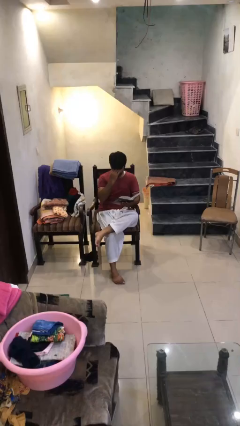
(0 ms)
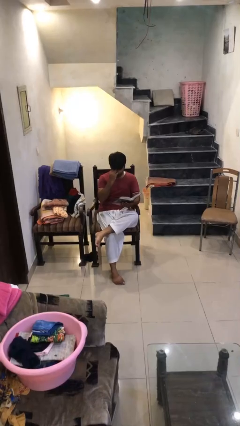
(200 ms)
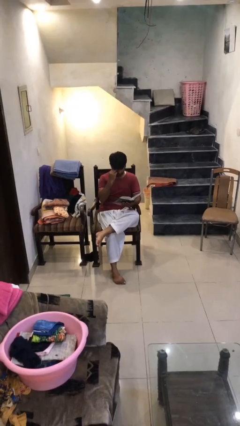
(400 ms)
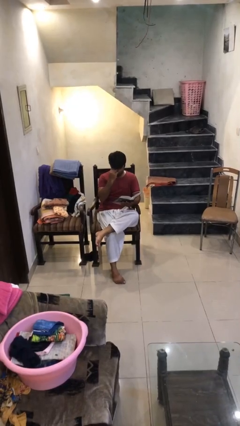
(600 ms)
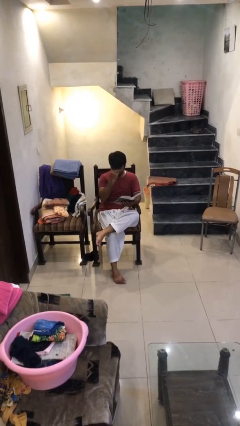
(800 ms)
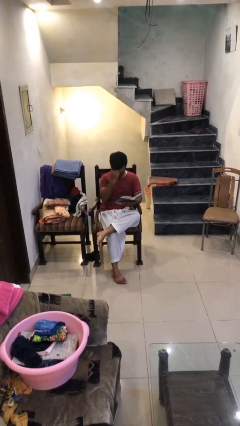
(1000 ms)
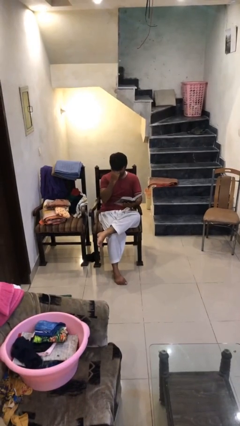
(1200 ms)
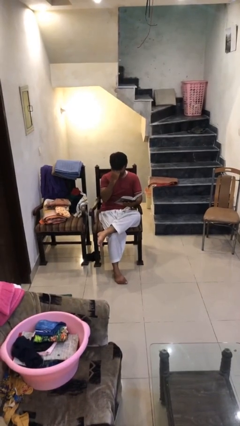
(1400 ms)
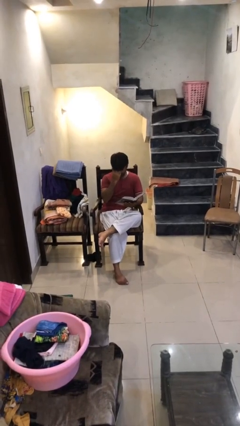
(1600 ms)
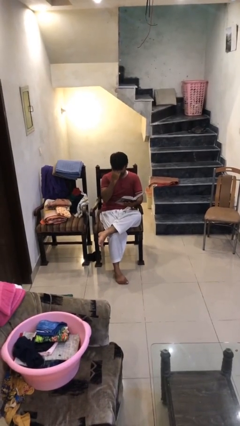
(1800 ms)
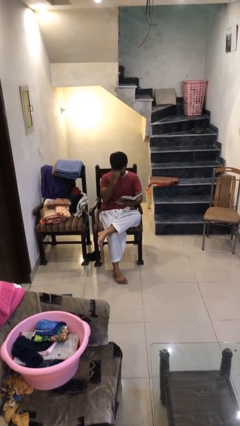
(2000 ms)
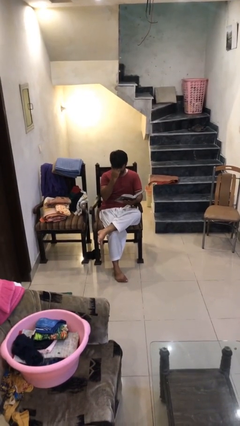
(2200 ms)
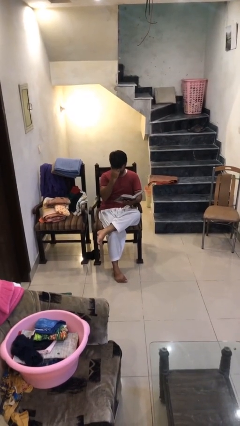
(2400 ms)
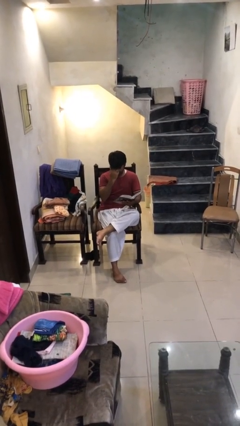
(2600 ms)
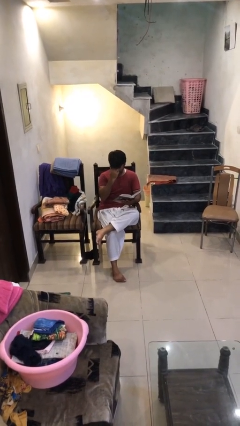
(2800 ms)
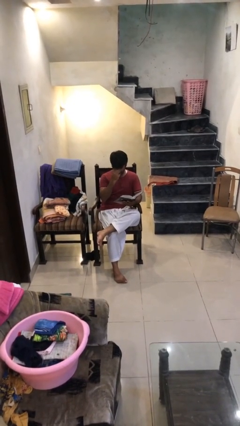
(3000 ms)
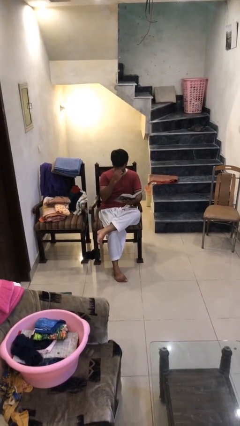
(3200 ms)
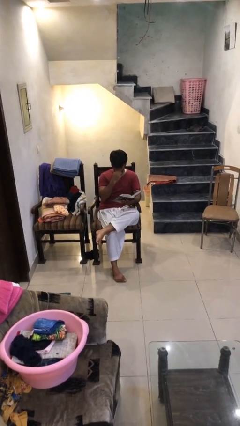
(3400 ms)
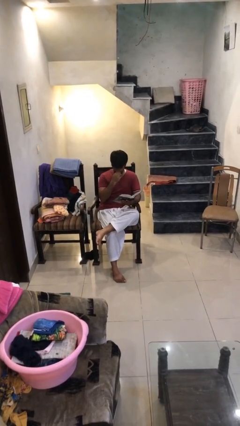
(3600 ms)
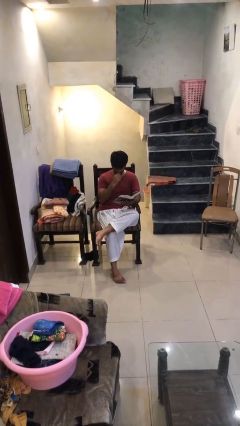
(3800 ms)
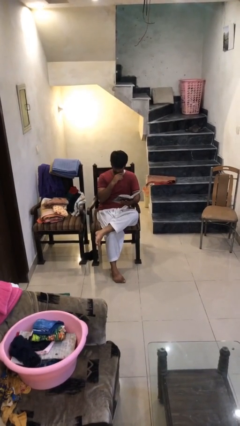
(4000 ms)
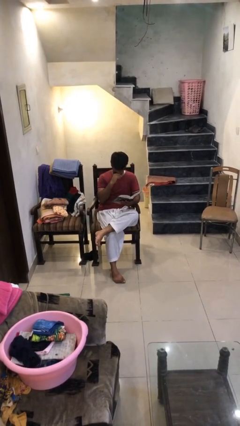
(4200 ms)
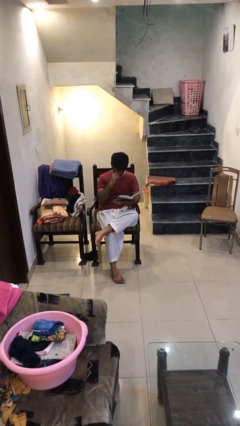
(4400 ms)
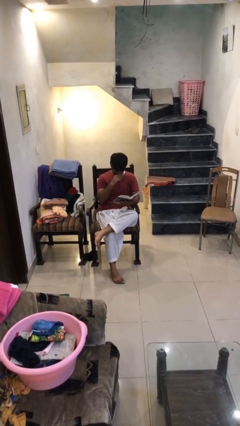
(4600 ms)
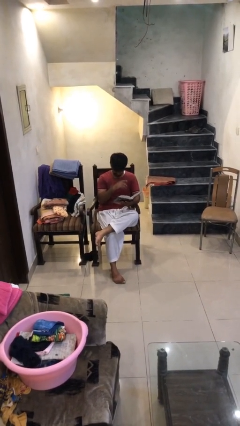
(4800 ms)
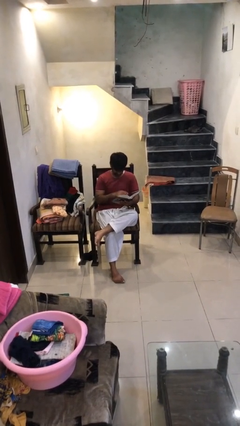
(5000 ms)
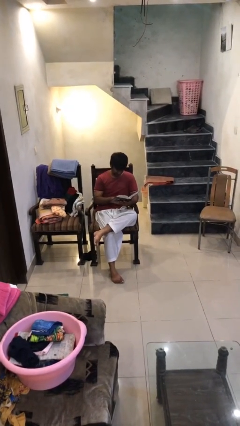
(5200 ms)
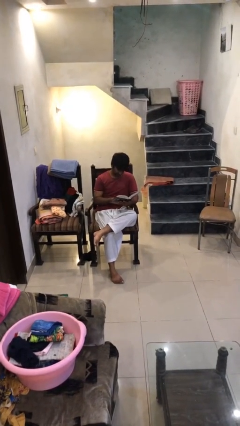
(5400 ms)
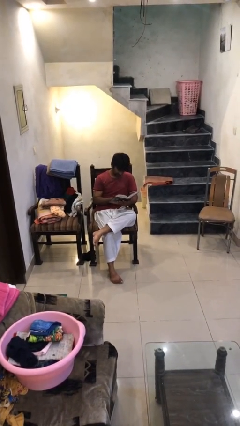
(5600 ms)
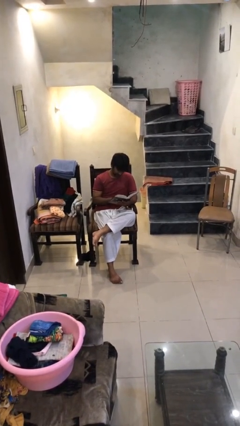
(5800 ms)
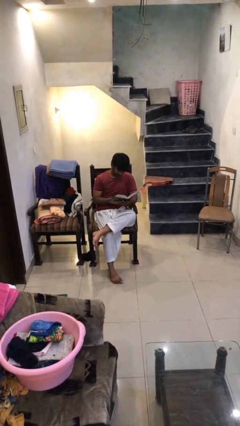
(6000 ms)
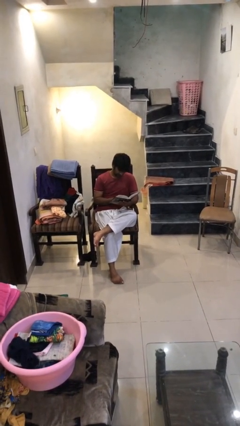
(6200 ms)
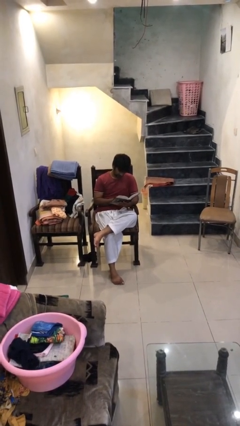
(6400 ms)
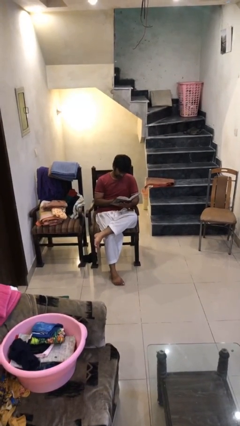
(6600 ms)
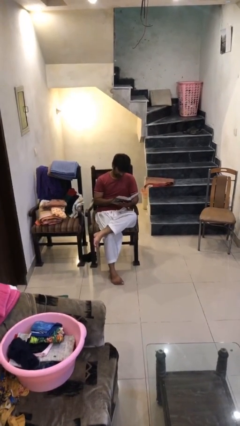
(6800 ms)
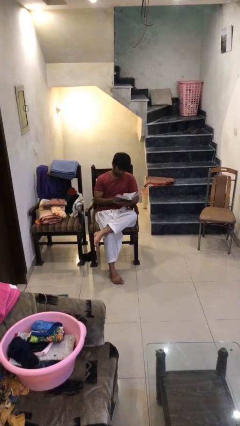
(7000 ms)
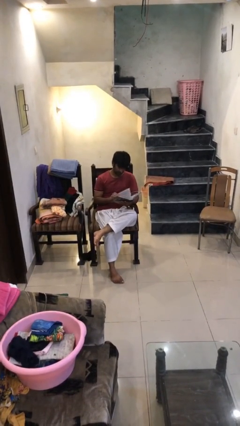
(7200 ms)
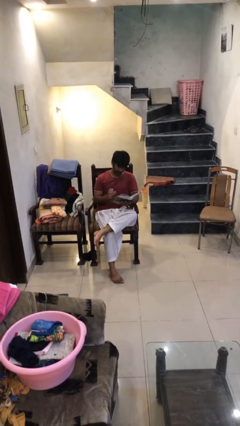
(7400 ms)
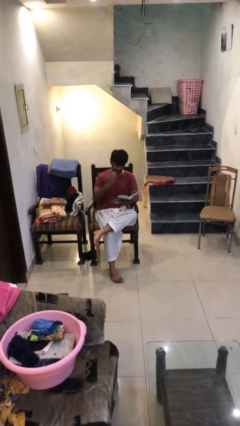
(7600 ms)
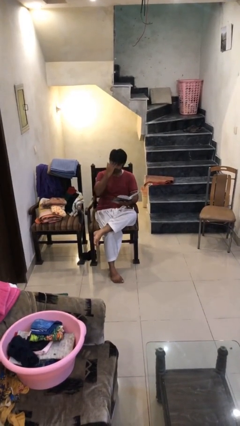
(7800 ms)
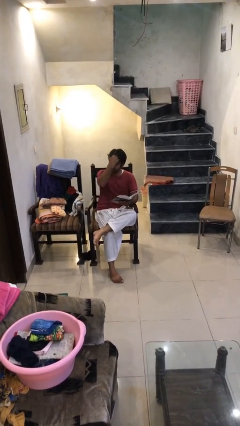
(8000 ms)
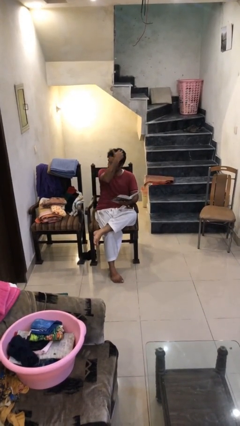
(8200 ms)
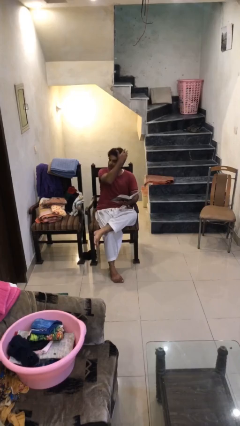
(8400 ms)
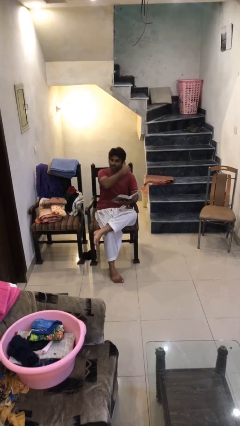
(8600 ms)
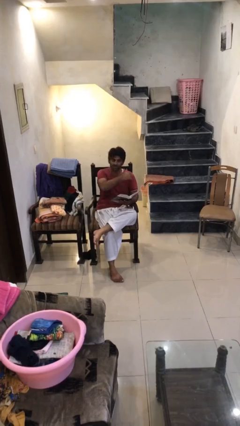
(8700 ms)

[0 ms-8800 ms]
person reads document

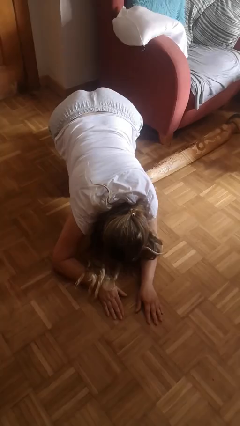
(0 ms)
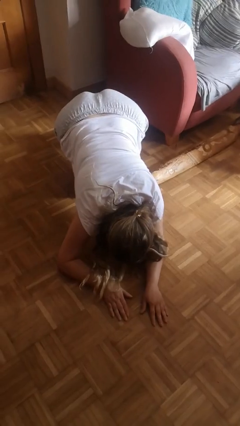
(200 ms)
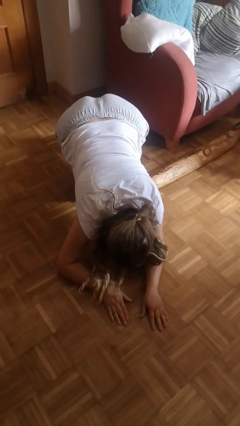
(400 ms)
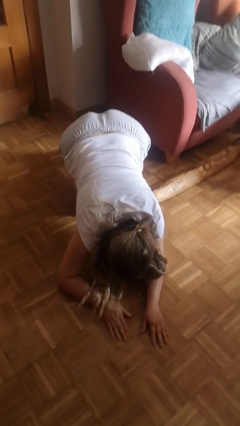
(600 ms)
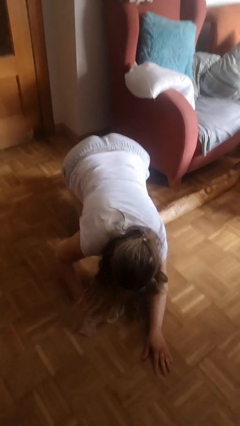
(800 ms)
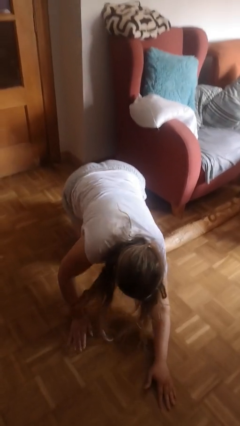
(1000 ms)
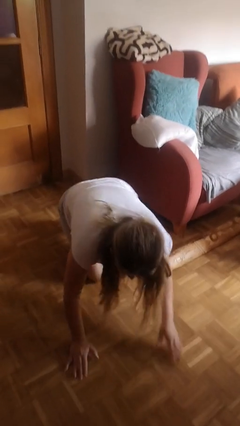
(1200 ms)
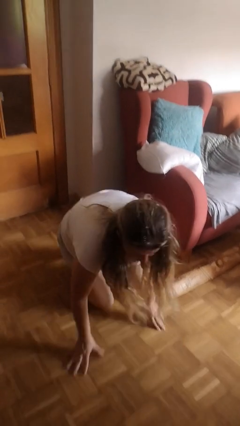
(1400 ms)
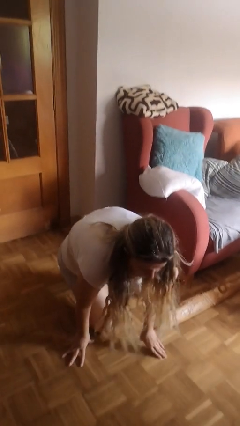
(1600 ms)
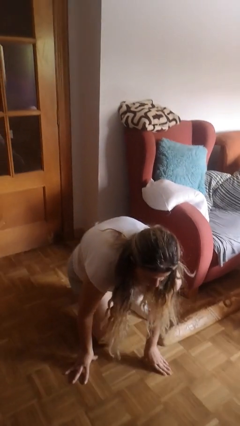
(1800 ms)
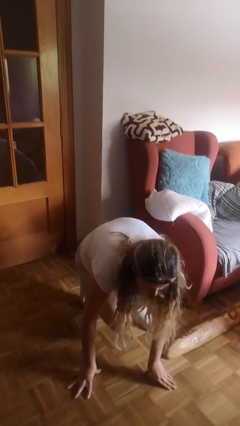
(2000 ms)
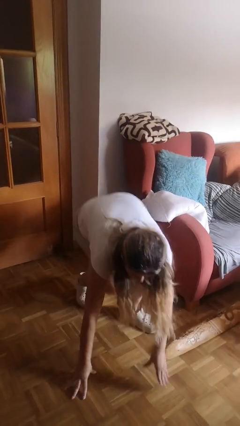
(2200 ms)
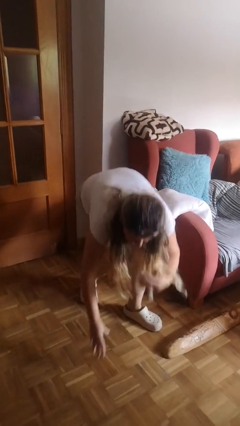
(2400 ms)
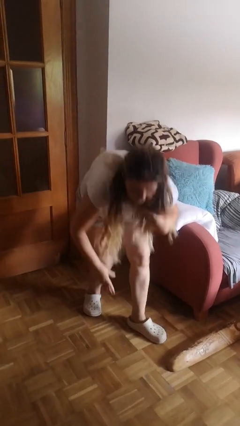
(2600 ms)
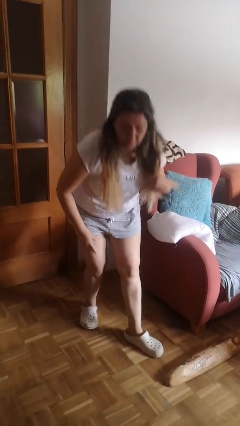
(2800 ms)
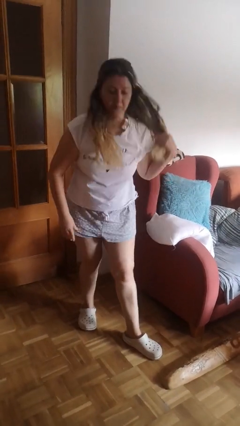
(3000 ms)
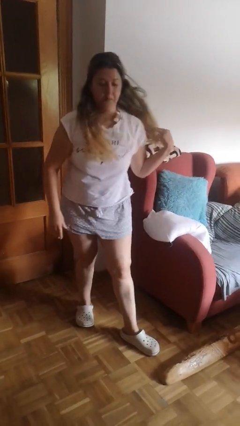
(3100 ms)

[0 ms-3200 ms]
person stands up from floor

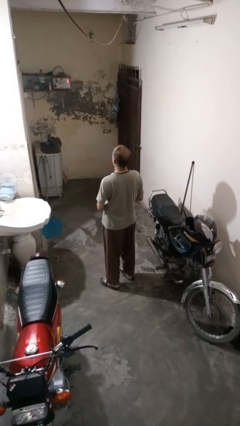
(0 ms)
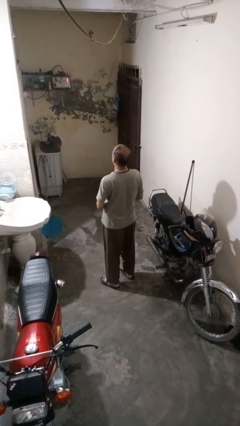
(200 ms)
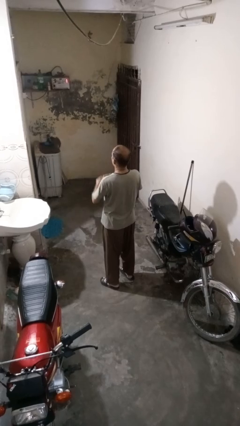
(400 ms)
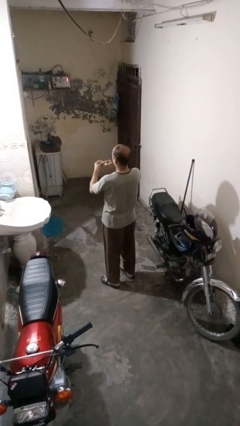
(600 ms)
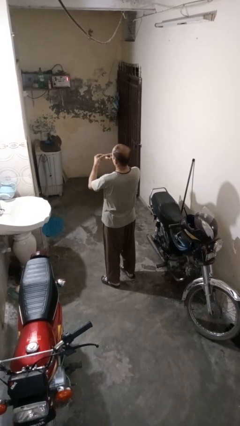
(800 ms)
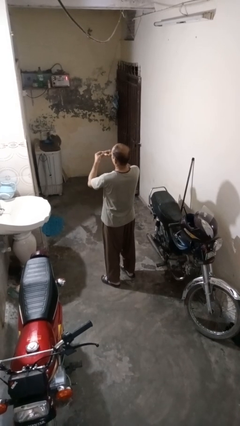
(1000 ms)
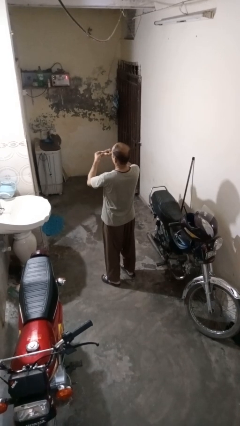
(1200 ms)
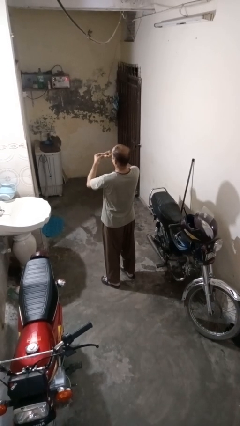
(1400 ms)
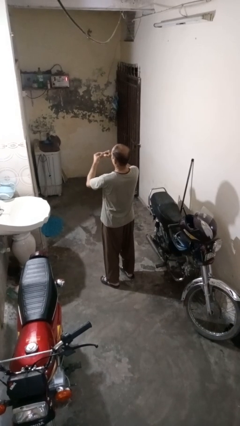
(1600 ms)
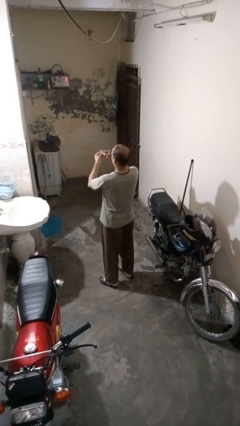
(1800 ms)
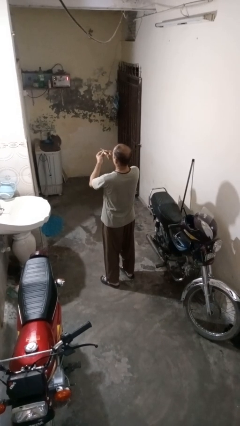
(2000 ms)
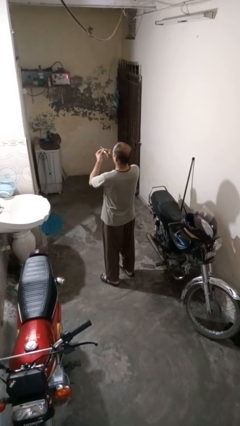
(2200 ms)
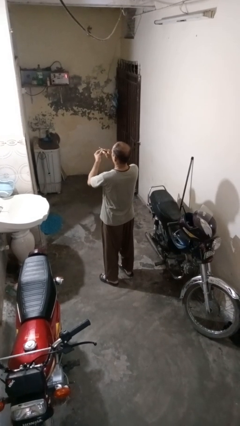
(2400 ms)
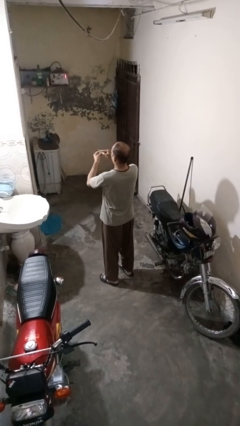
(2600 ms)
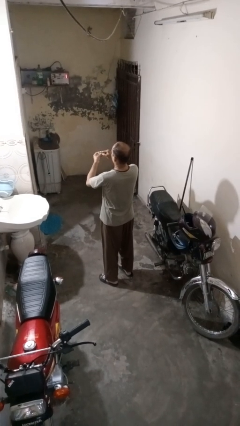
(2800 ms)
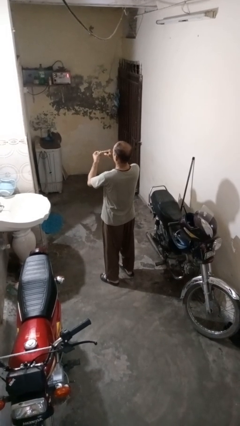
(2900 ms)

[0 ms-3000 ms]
person files fingernails

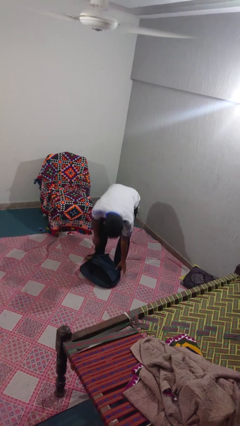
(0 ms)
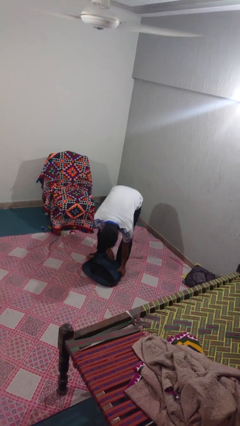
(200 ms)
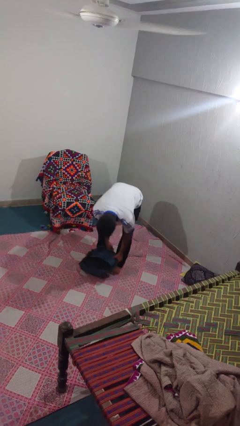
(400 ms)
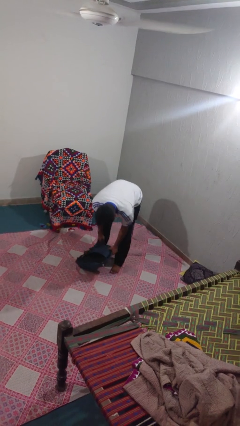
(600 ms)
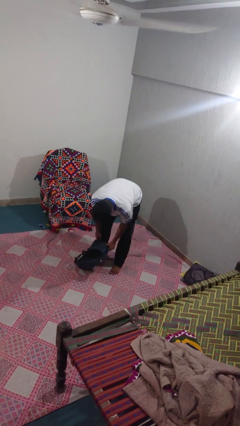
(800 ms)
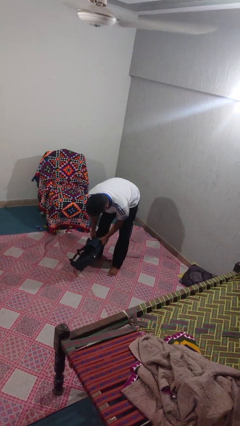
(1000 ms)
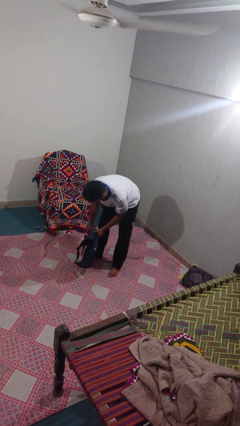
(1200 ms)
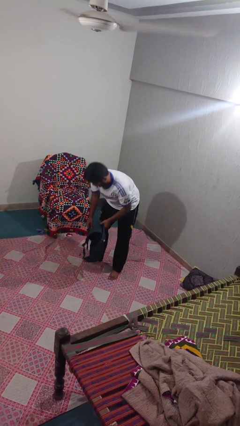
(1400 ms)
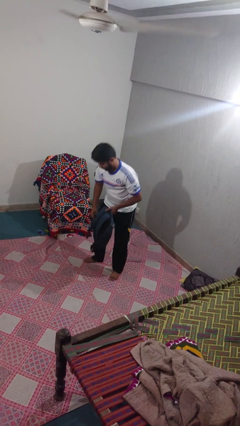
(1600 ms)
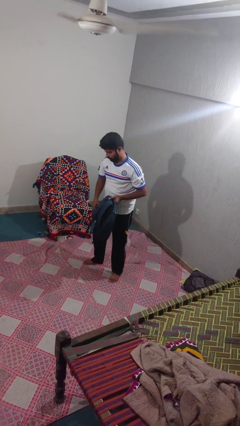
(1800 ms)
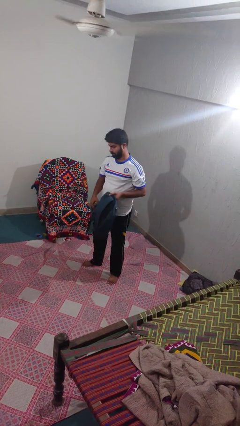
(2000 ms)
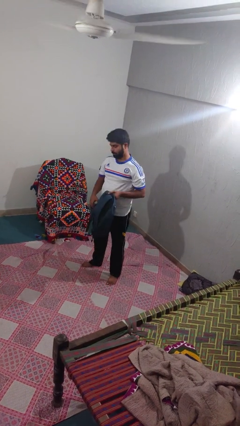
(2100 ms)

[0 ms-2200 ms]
person picks up object from floor

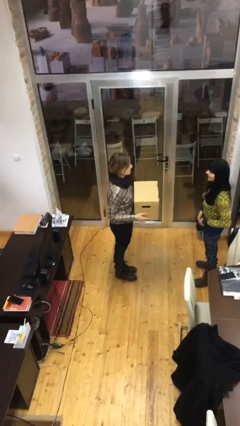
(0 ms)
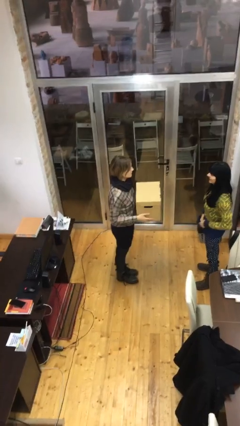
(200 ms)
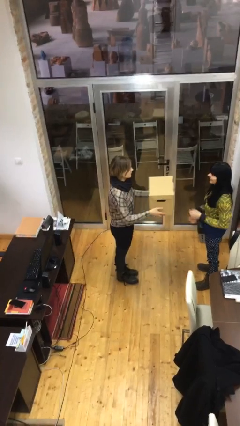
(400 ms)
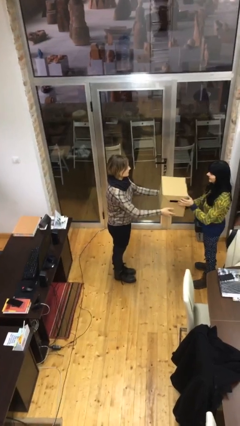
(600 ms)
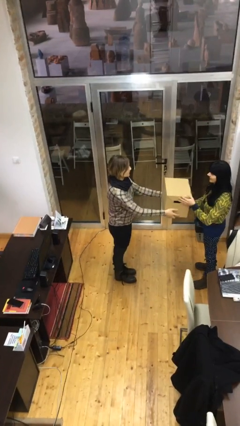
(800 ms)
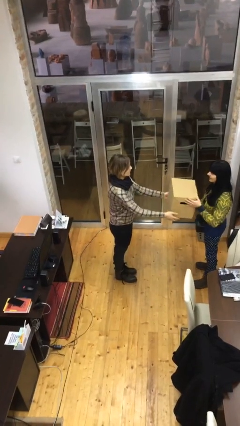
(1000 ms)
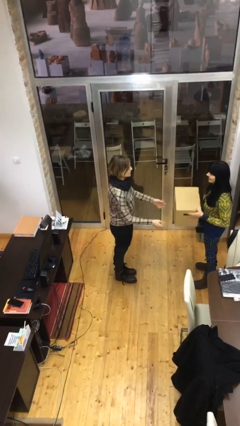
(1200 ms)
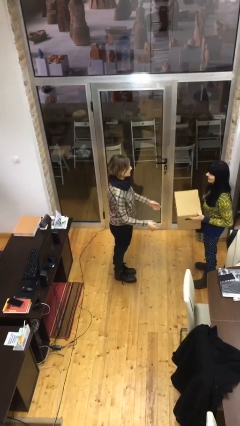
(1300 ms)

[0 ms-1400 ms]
person transfers object to person
